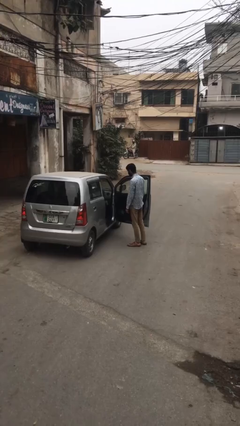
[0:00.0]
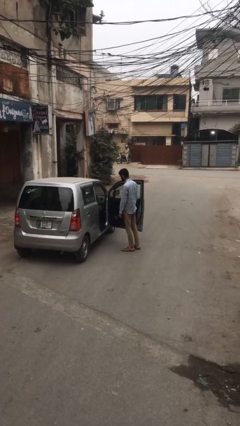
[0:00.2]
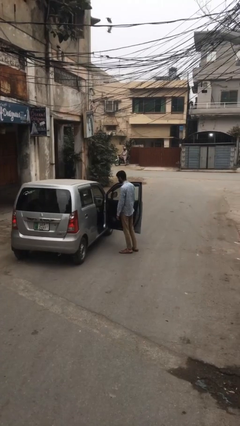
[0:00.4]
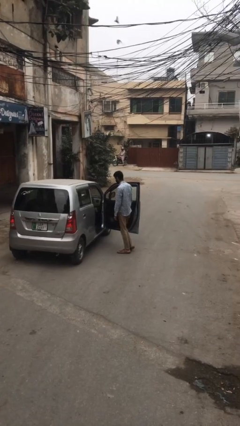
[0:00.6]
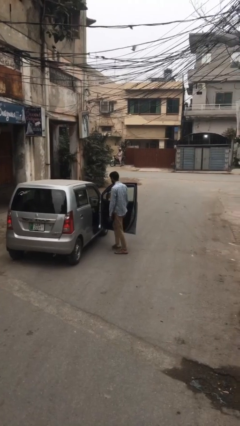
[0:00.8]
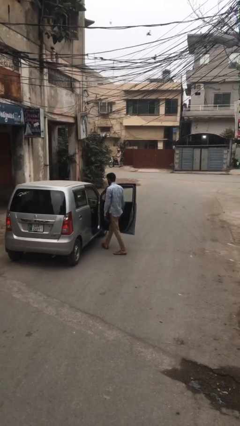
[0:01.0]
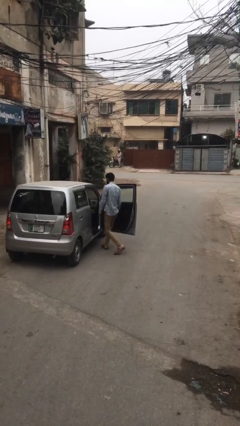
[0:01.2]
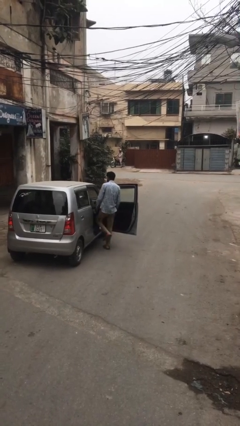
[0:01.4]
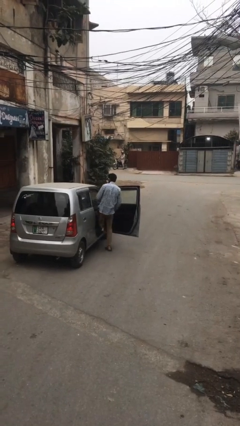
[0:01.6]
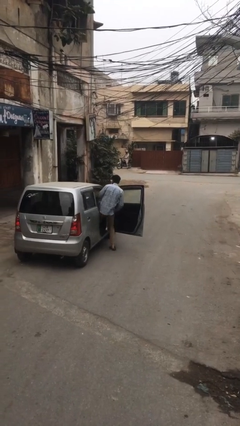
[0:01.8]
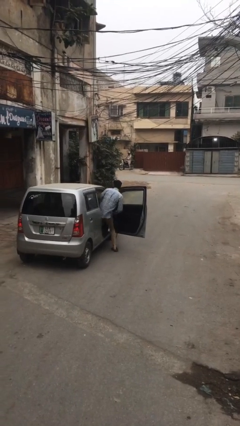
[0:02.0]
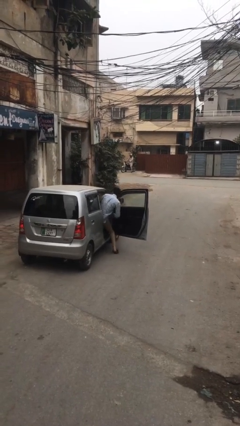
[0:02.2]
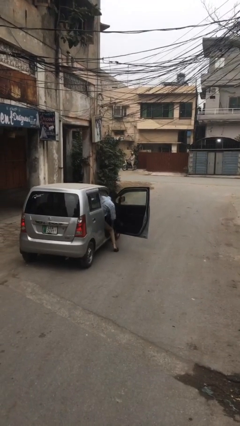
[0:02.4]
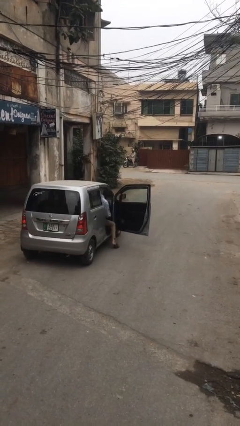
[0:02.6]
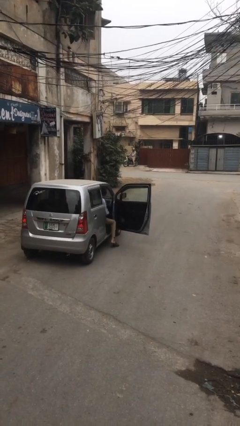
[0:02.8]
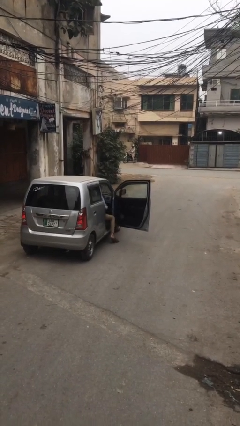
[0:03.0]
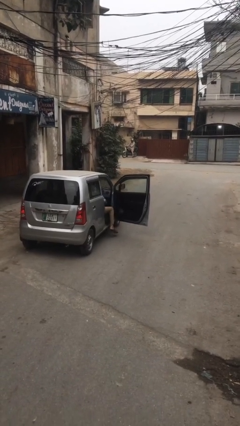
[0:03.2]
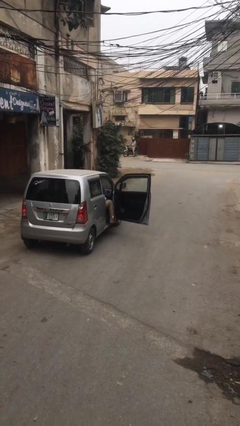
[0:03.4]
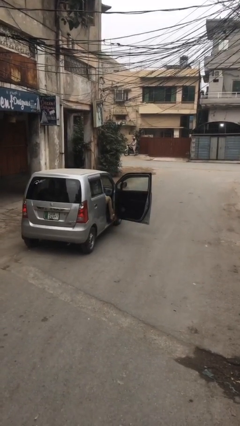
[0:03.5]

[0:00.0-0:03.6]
person enters car

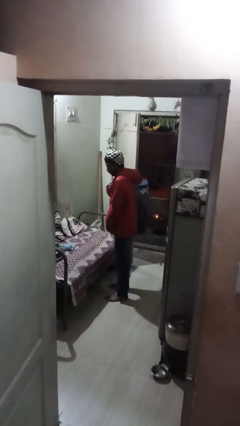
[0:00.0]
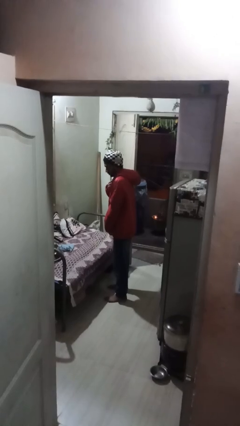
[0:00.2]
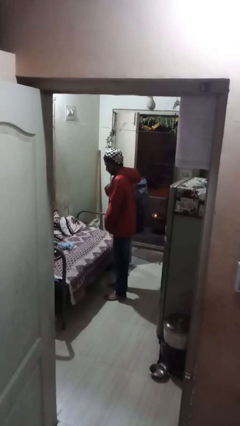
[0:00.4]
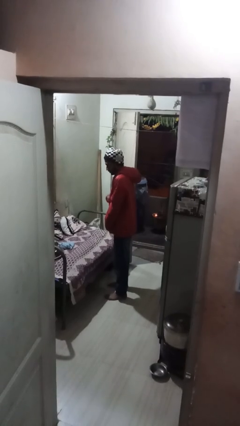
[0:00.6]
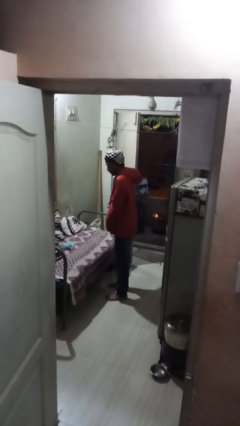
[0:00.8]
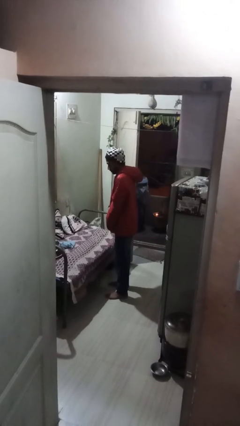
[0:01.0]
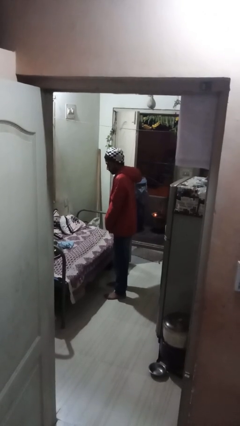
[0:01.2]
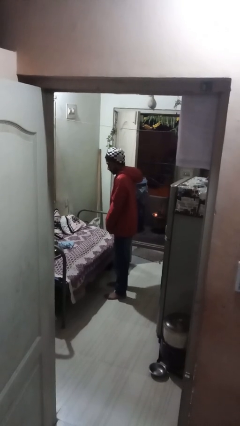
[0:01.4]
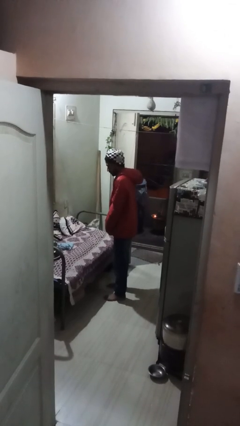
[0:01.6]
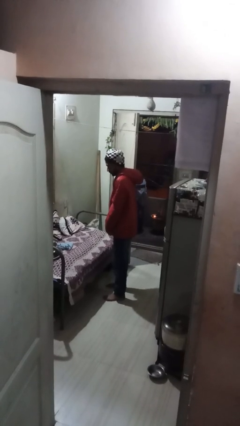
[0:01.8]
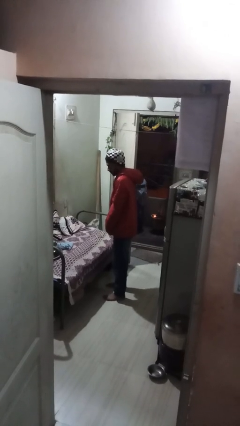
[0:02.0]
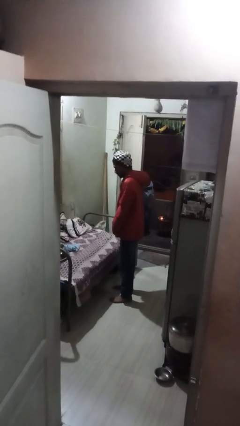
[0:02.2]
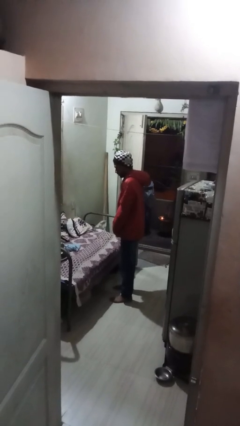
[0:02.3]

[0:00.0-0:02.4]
person unzips jacket

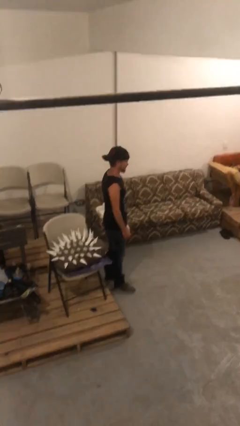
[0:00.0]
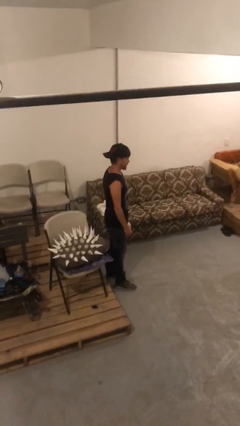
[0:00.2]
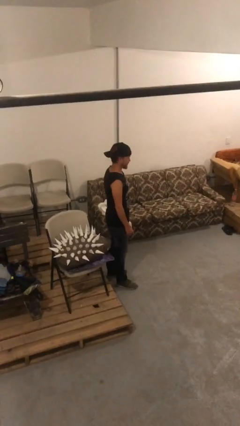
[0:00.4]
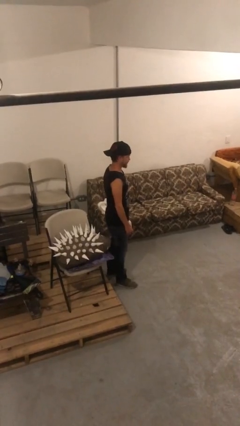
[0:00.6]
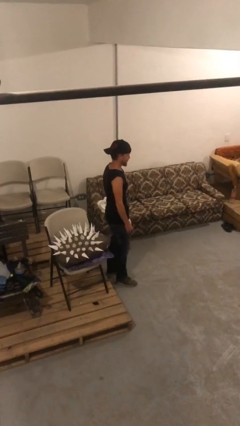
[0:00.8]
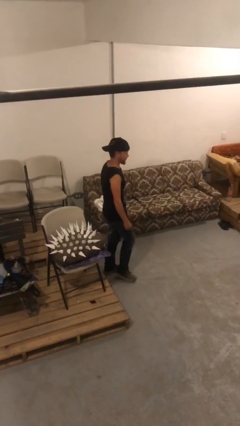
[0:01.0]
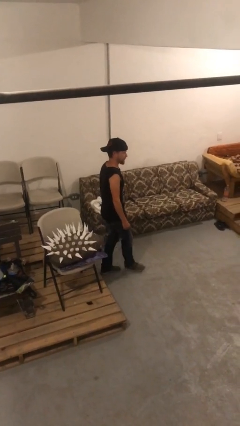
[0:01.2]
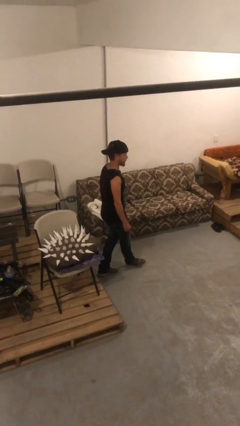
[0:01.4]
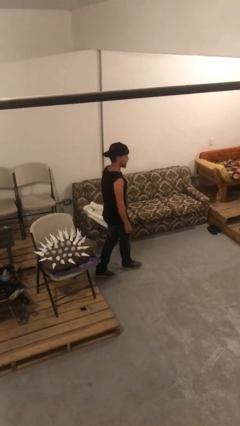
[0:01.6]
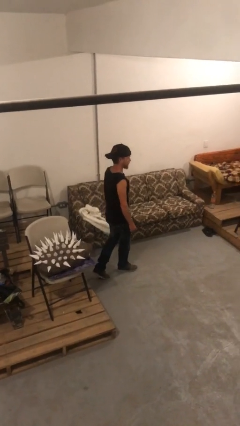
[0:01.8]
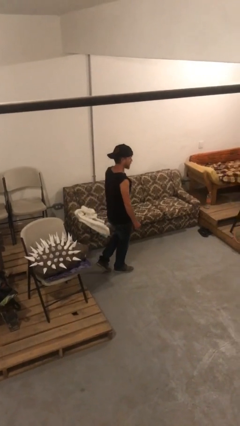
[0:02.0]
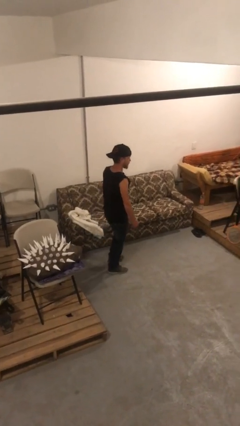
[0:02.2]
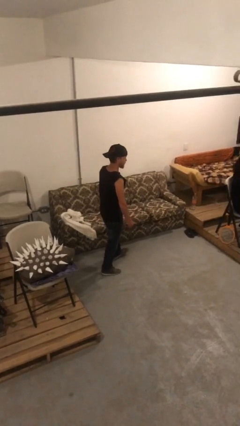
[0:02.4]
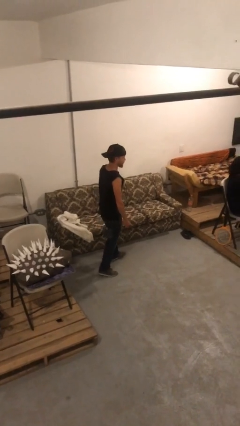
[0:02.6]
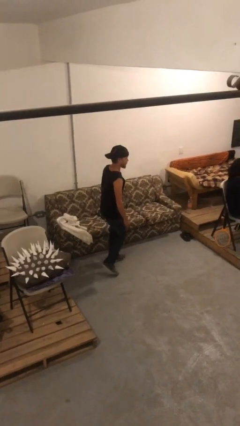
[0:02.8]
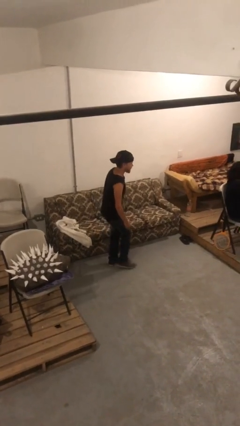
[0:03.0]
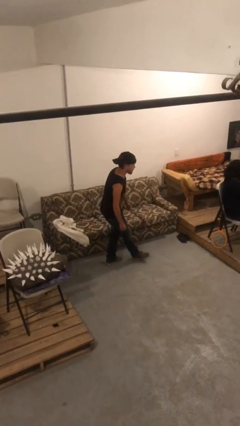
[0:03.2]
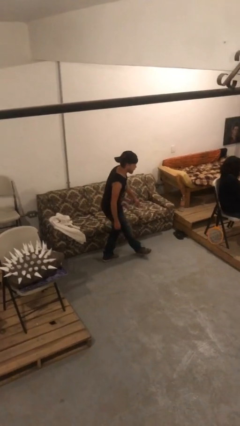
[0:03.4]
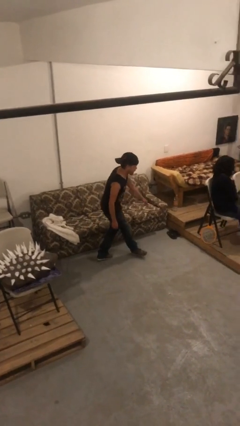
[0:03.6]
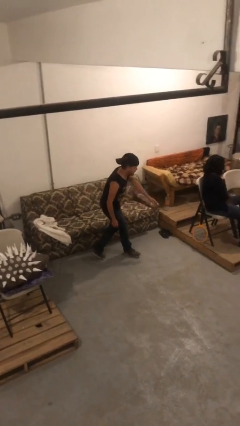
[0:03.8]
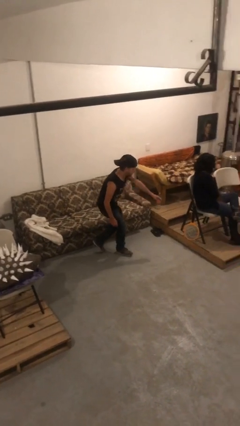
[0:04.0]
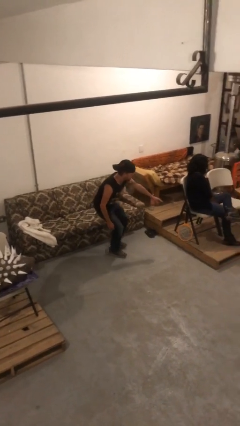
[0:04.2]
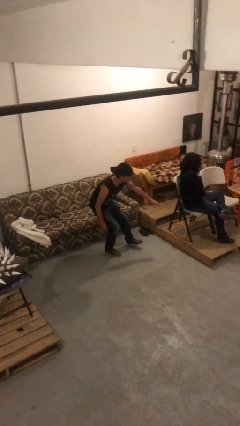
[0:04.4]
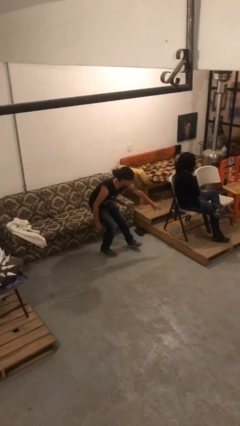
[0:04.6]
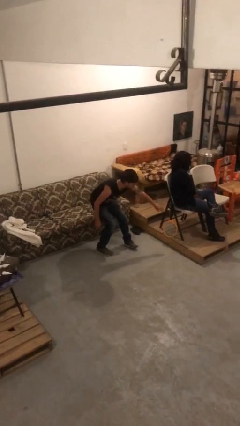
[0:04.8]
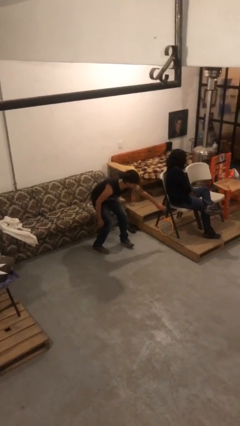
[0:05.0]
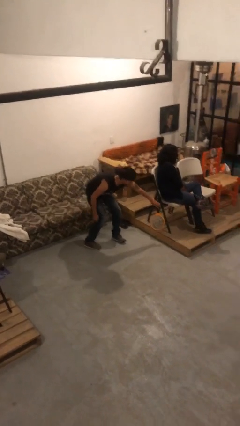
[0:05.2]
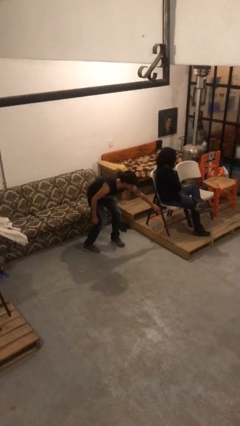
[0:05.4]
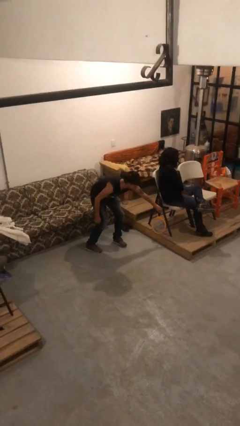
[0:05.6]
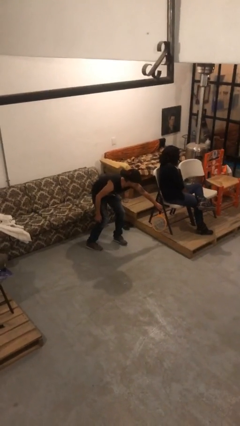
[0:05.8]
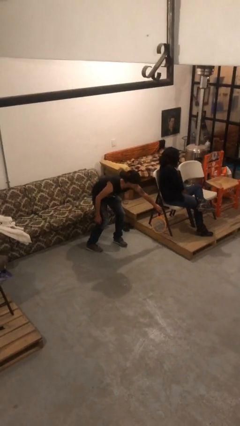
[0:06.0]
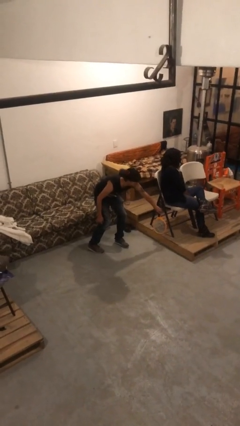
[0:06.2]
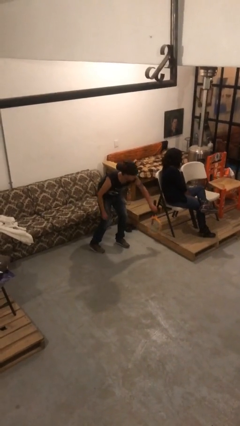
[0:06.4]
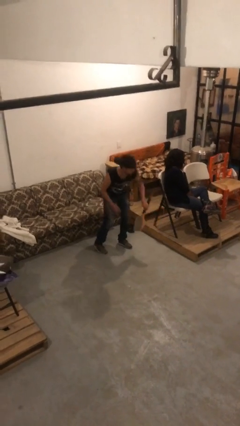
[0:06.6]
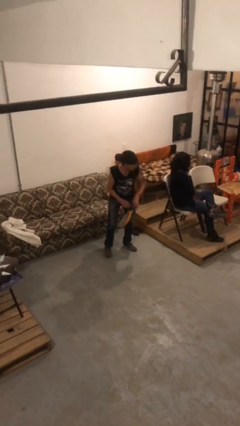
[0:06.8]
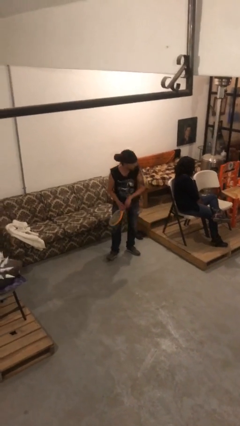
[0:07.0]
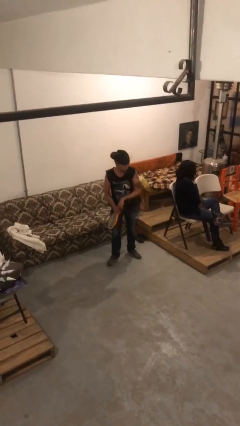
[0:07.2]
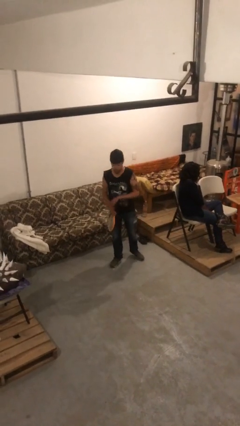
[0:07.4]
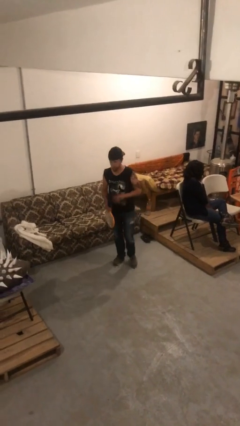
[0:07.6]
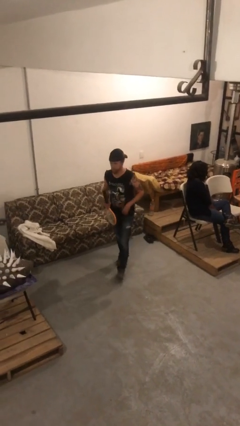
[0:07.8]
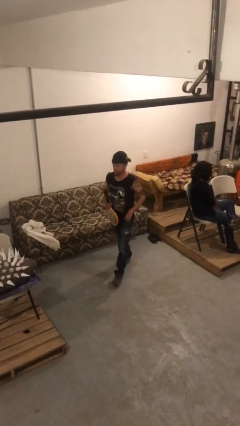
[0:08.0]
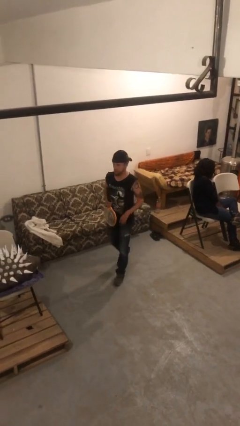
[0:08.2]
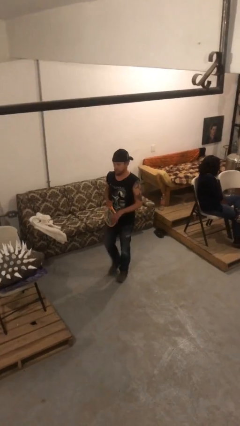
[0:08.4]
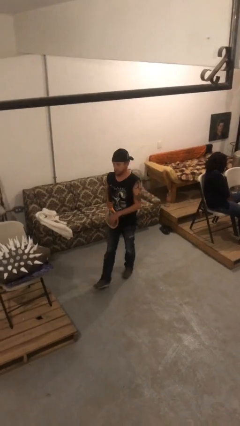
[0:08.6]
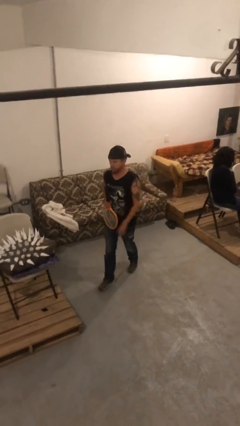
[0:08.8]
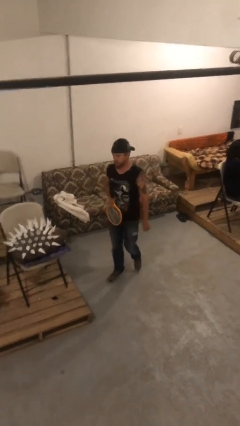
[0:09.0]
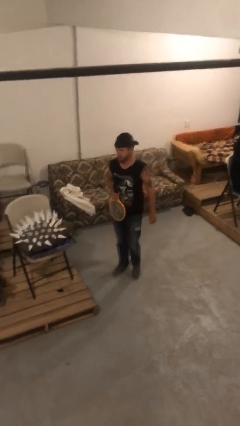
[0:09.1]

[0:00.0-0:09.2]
person steals object from person

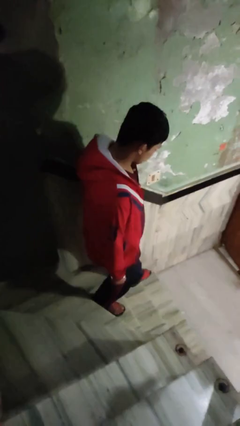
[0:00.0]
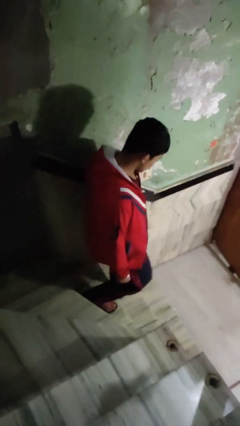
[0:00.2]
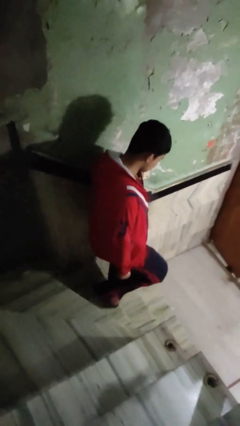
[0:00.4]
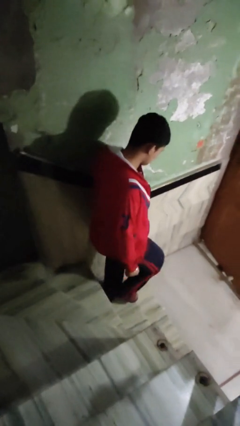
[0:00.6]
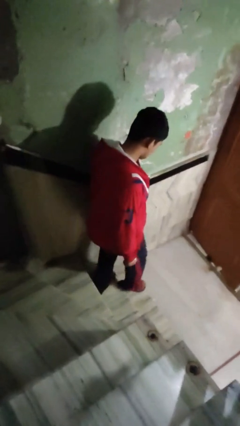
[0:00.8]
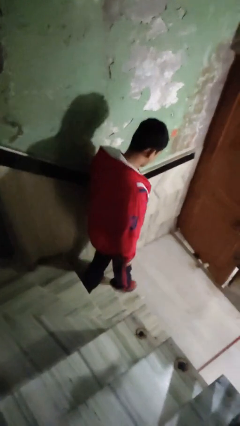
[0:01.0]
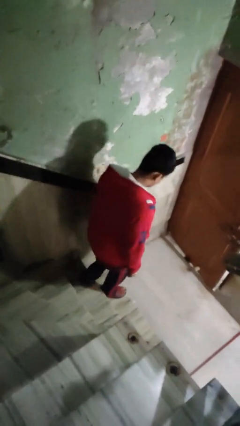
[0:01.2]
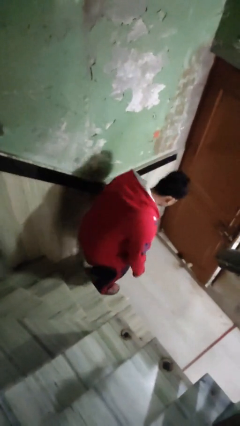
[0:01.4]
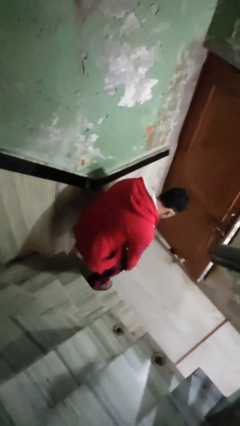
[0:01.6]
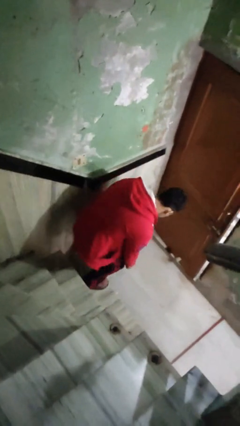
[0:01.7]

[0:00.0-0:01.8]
person climbs down stairs

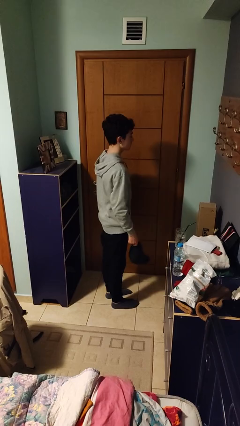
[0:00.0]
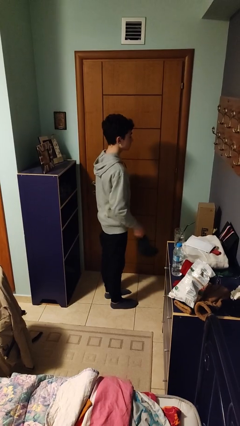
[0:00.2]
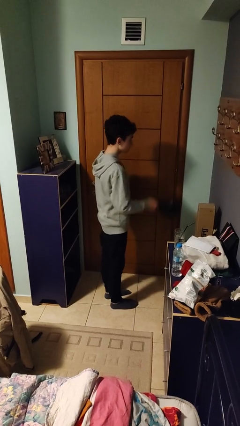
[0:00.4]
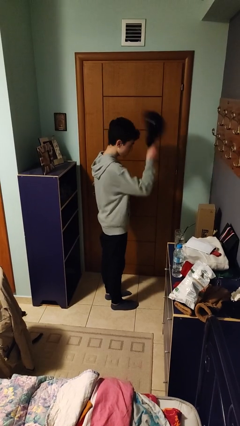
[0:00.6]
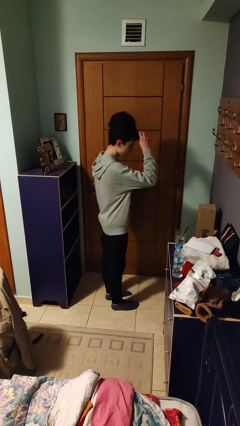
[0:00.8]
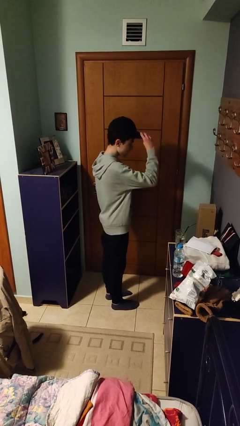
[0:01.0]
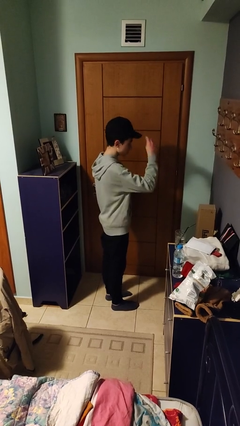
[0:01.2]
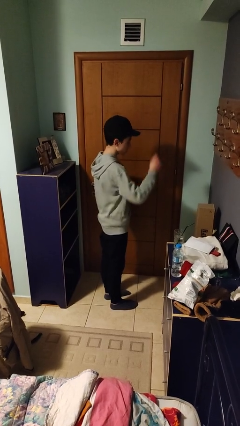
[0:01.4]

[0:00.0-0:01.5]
person puts on hat
